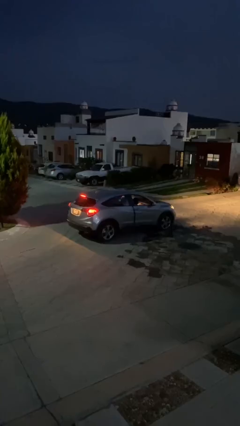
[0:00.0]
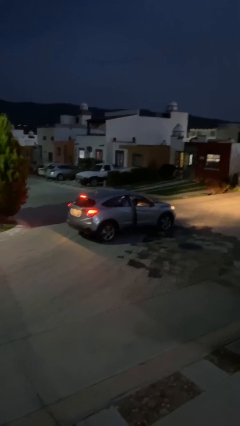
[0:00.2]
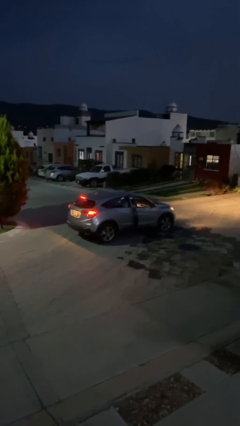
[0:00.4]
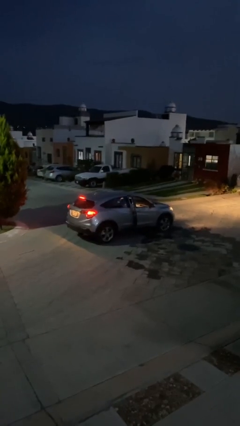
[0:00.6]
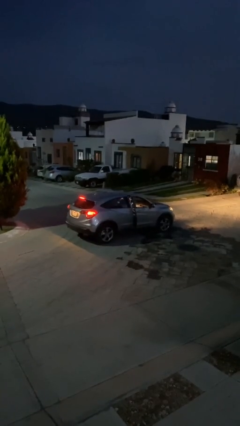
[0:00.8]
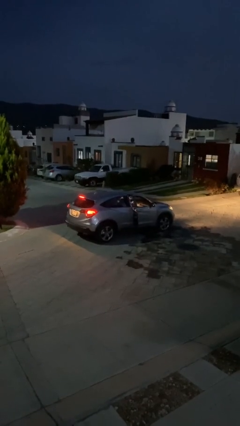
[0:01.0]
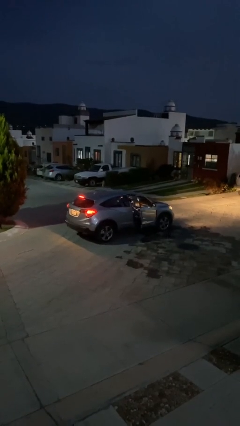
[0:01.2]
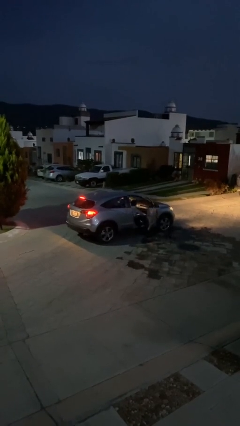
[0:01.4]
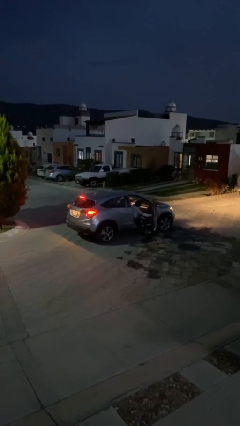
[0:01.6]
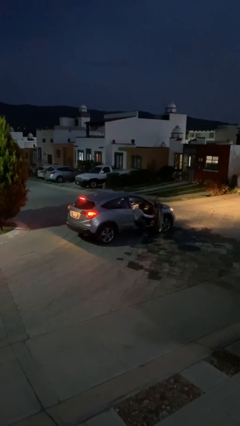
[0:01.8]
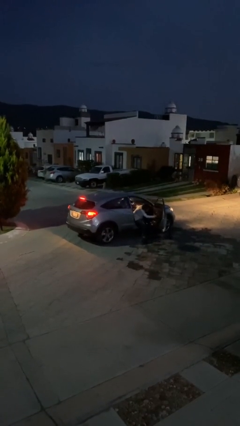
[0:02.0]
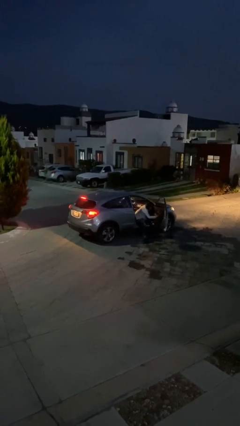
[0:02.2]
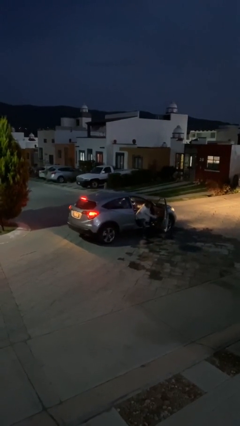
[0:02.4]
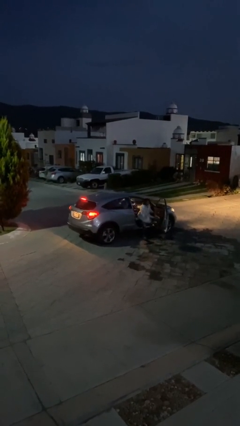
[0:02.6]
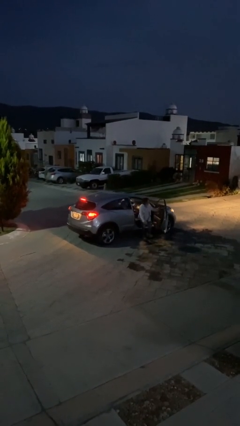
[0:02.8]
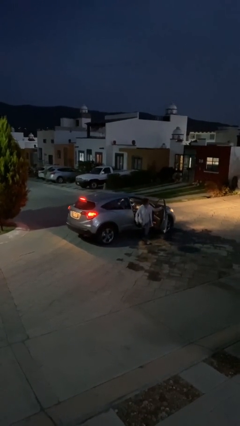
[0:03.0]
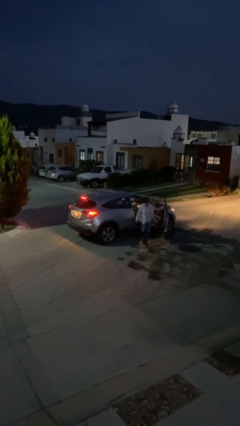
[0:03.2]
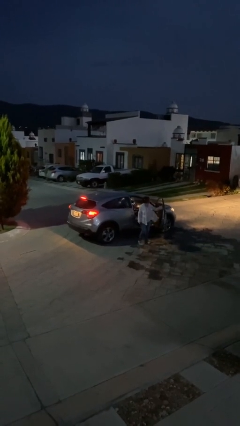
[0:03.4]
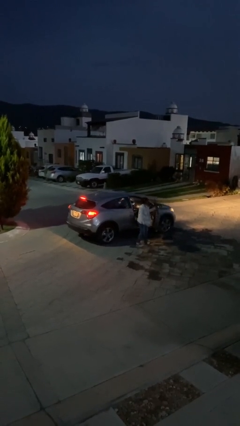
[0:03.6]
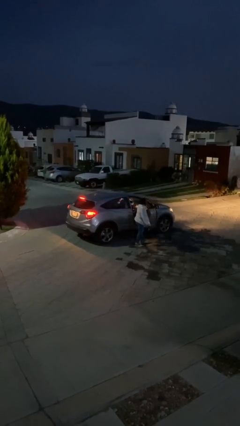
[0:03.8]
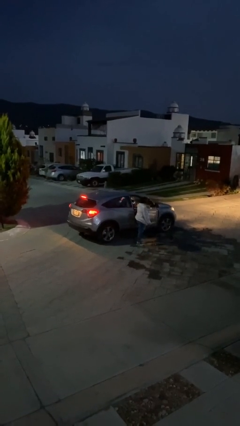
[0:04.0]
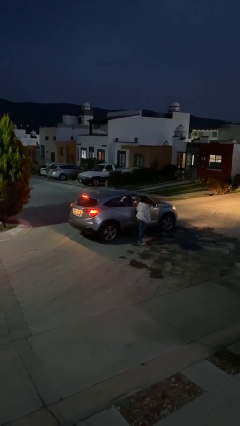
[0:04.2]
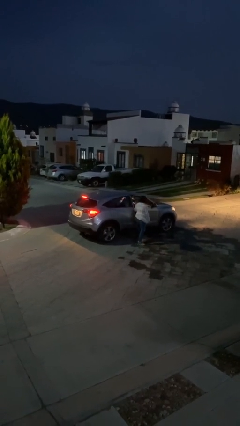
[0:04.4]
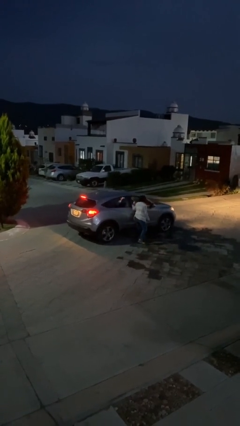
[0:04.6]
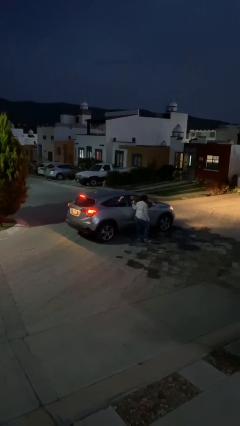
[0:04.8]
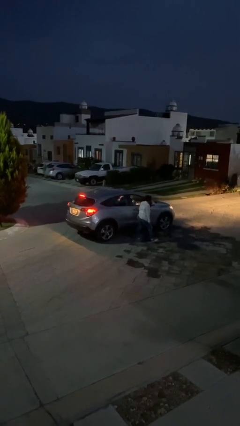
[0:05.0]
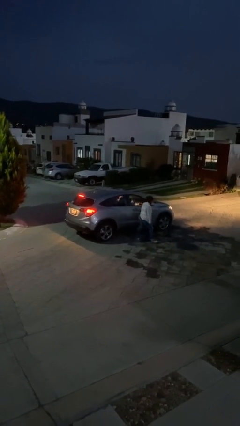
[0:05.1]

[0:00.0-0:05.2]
car drops off person

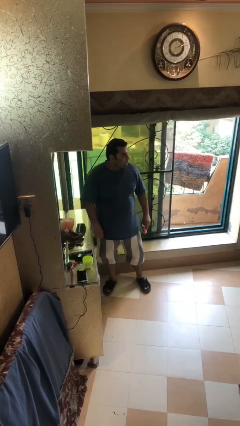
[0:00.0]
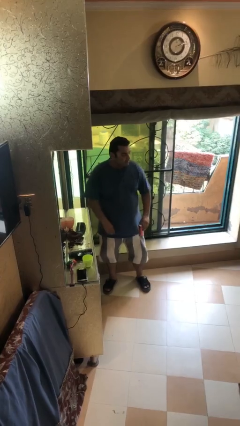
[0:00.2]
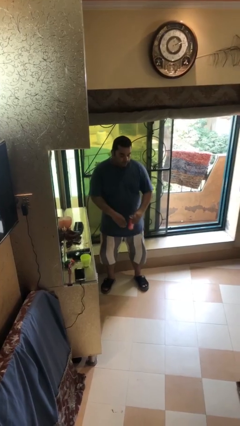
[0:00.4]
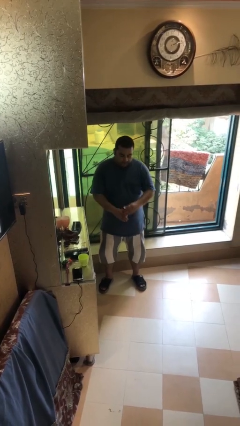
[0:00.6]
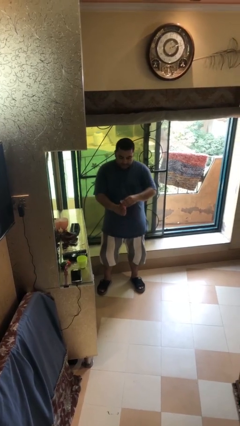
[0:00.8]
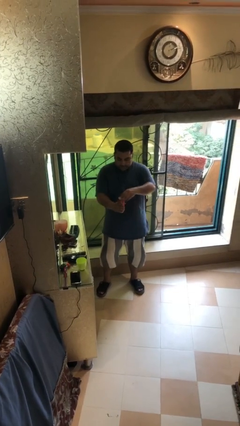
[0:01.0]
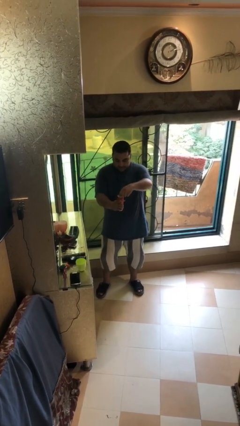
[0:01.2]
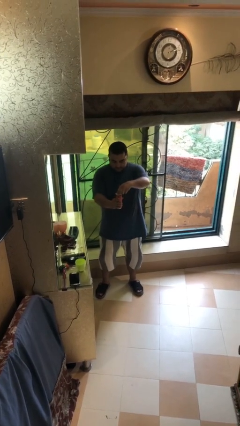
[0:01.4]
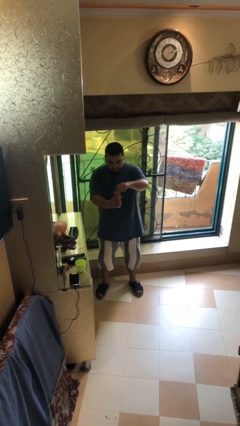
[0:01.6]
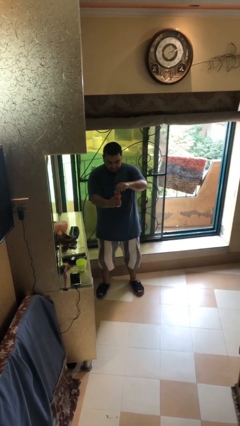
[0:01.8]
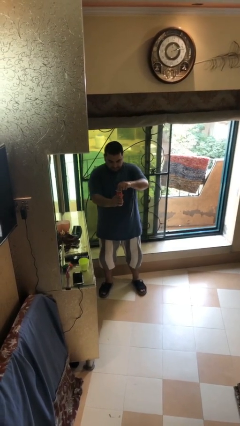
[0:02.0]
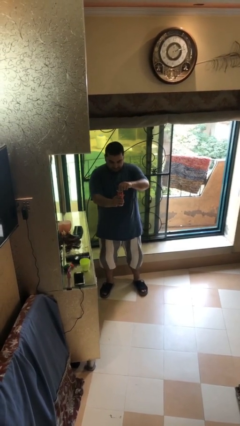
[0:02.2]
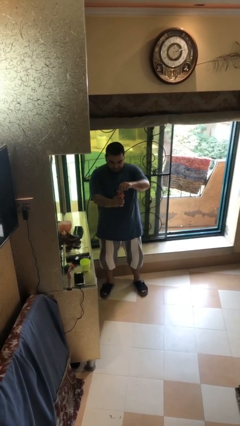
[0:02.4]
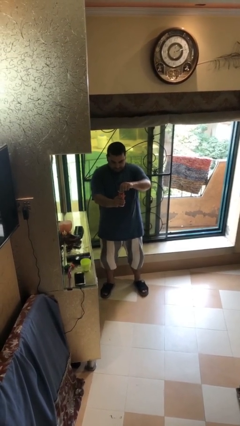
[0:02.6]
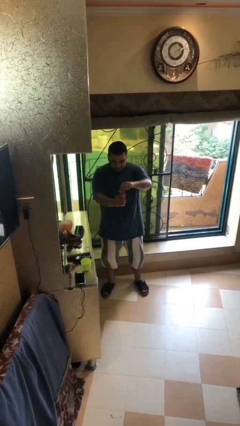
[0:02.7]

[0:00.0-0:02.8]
person opens beverage can

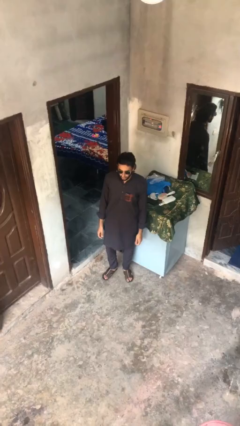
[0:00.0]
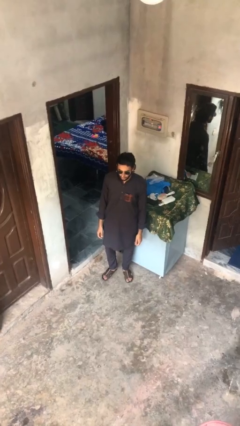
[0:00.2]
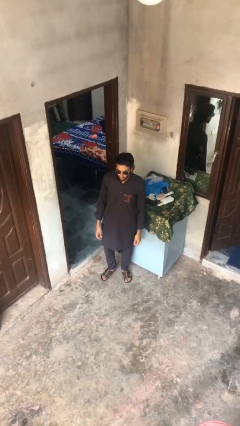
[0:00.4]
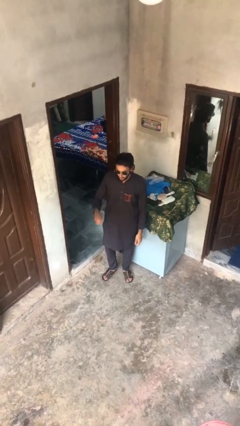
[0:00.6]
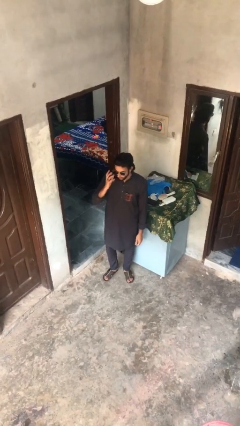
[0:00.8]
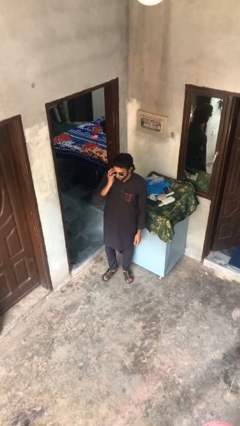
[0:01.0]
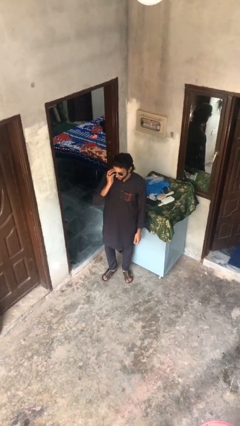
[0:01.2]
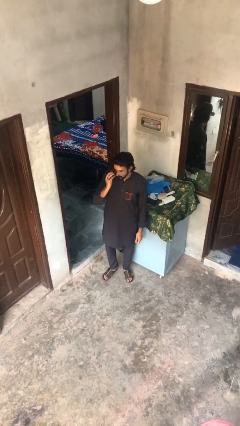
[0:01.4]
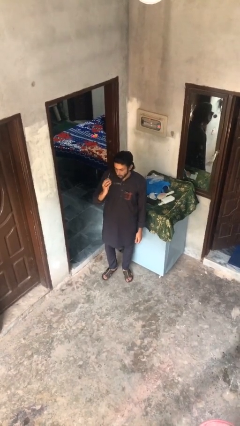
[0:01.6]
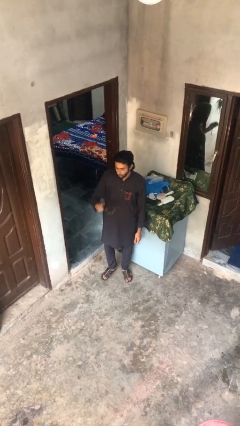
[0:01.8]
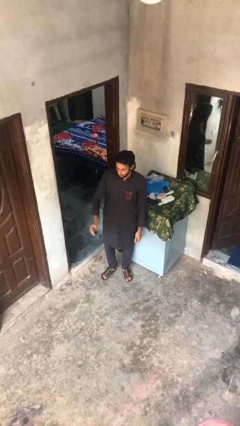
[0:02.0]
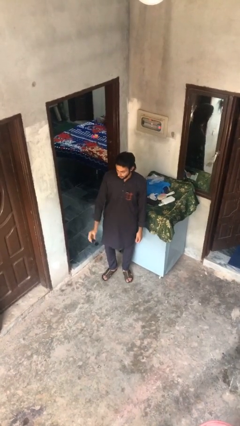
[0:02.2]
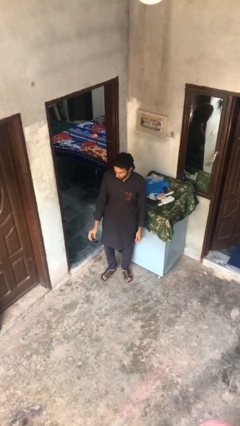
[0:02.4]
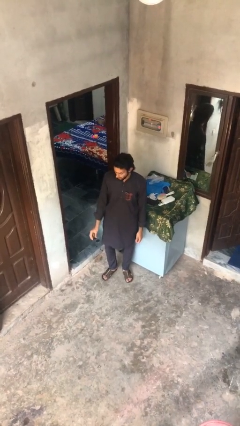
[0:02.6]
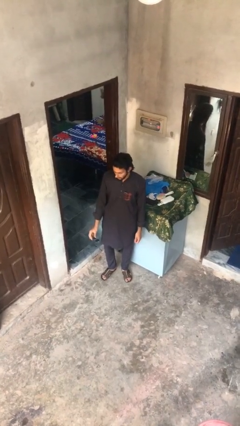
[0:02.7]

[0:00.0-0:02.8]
person takes off sunglasses

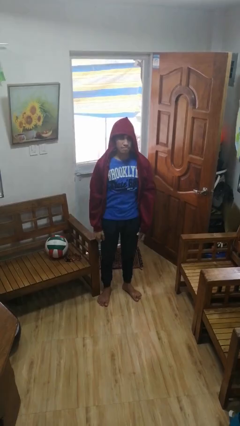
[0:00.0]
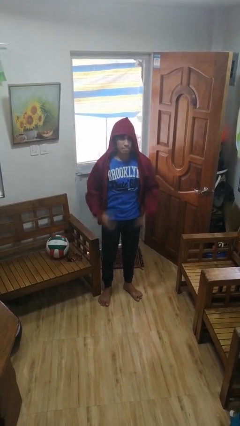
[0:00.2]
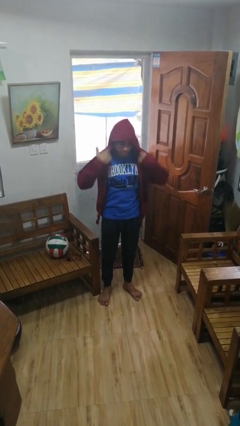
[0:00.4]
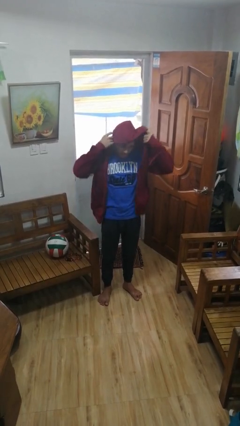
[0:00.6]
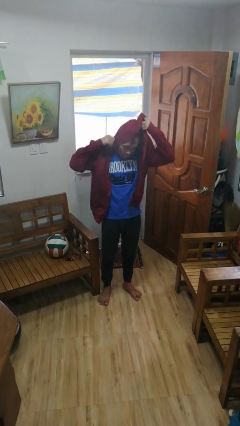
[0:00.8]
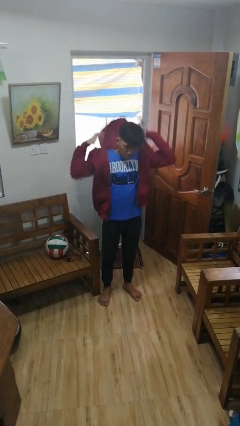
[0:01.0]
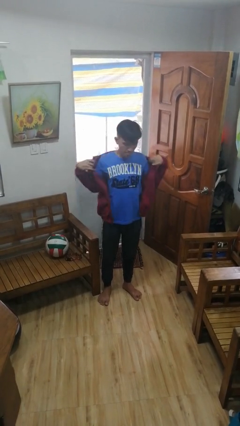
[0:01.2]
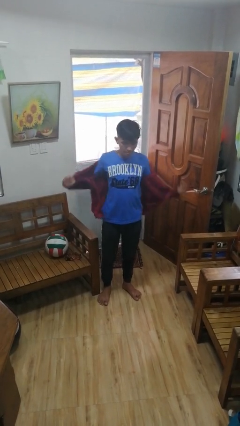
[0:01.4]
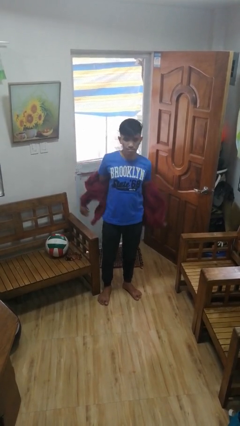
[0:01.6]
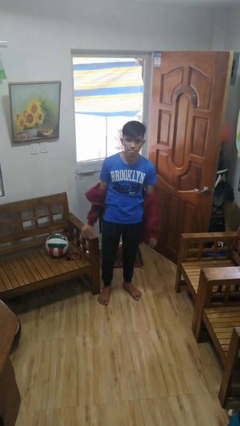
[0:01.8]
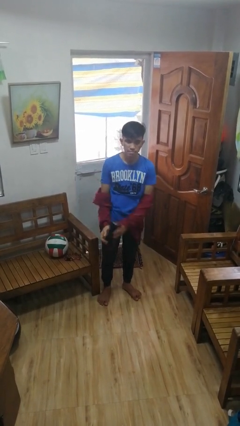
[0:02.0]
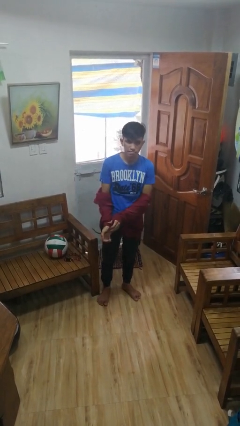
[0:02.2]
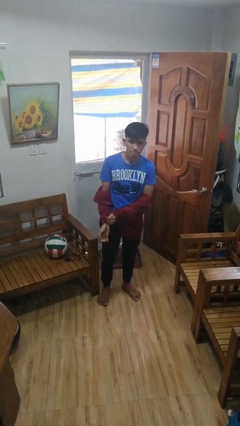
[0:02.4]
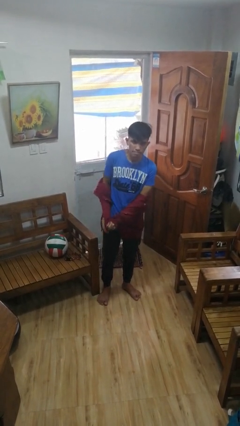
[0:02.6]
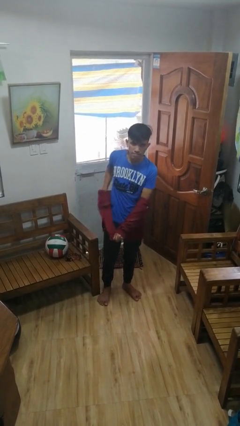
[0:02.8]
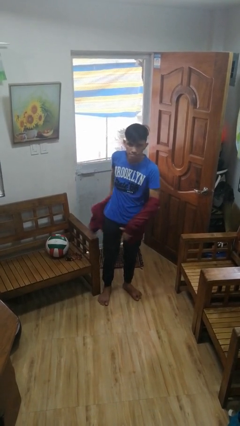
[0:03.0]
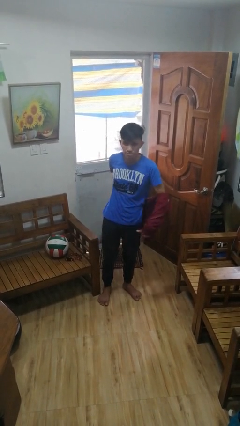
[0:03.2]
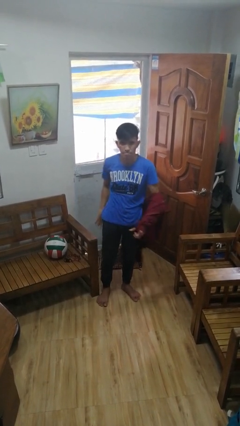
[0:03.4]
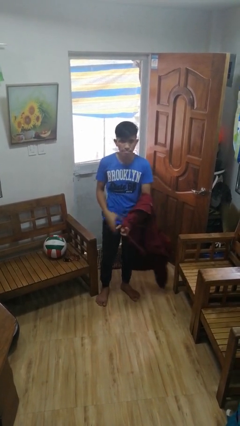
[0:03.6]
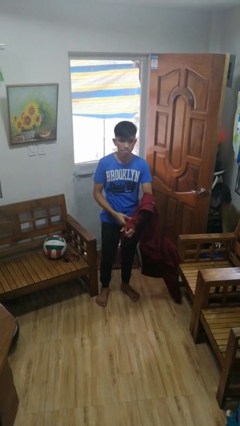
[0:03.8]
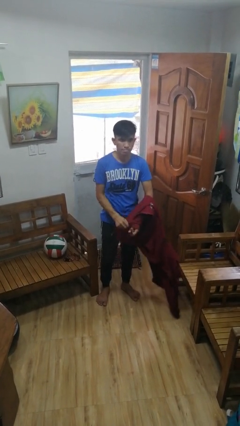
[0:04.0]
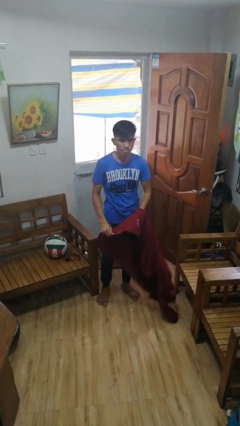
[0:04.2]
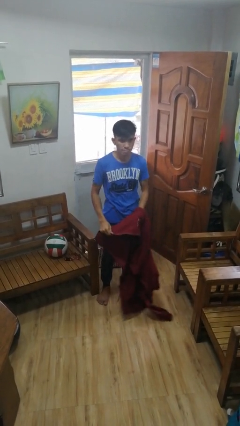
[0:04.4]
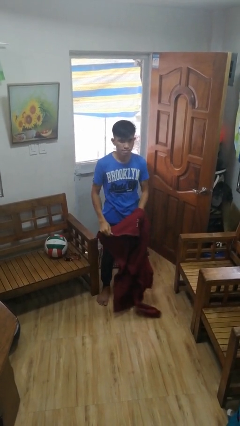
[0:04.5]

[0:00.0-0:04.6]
person takes off hoodie

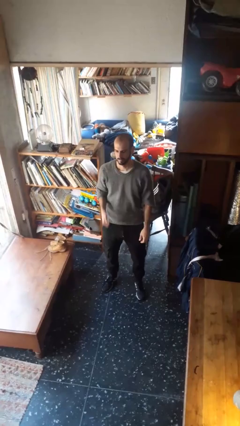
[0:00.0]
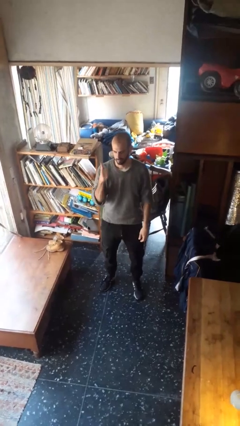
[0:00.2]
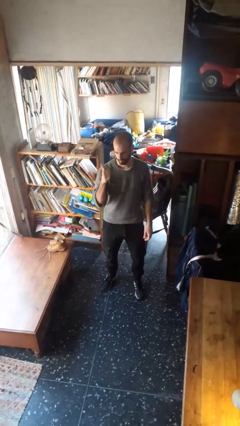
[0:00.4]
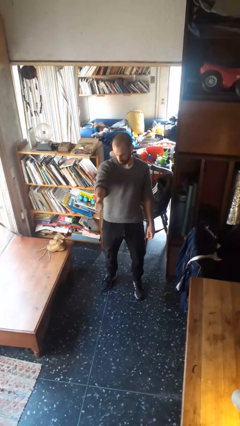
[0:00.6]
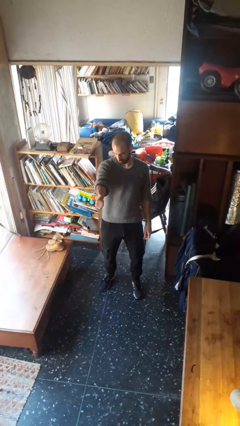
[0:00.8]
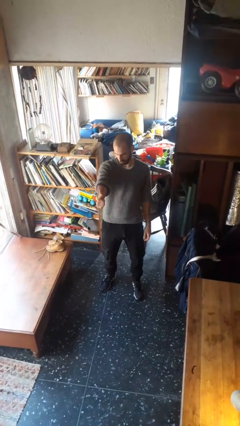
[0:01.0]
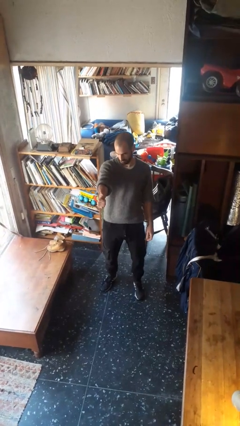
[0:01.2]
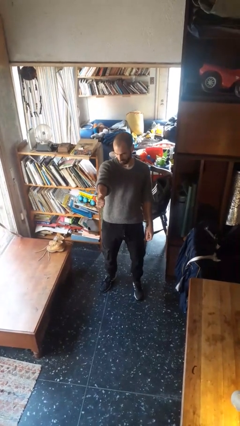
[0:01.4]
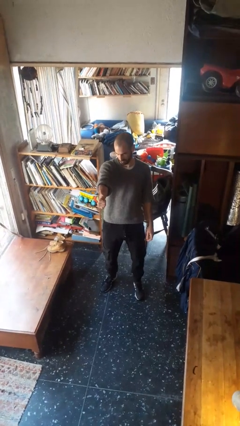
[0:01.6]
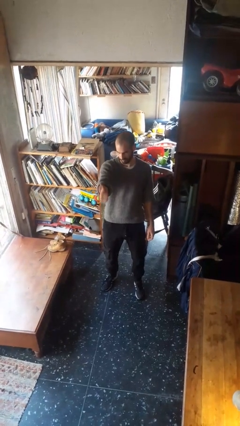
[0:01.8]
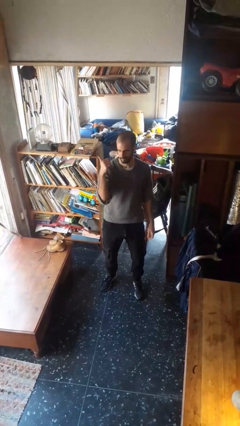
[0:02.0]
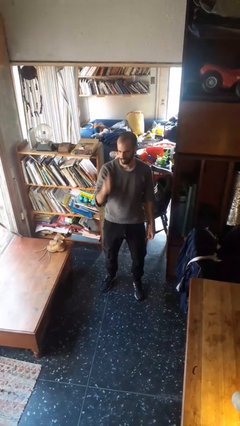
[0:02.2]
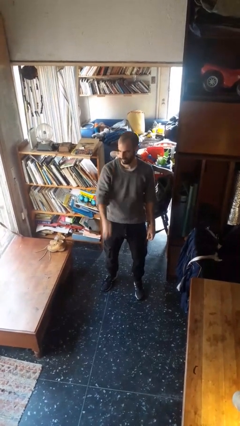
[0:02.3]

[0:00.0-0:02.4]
person gestures thumbs up
